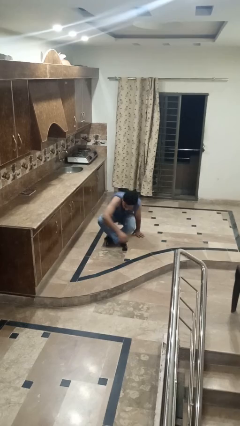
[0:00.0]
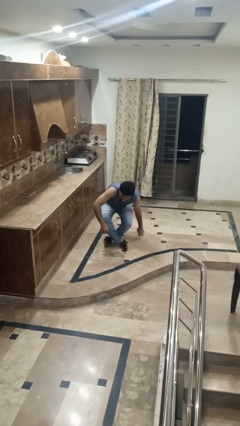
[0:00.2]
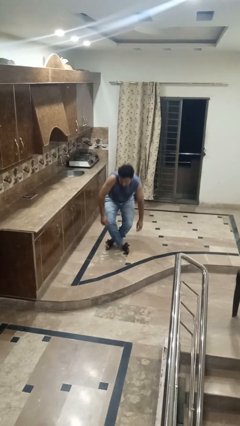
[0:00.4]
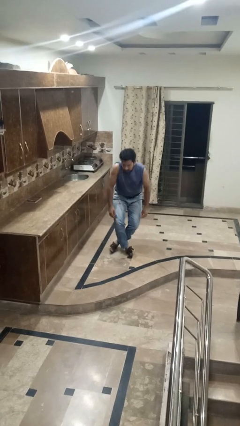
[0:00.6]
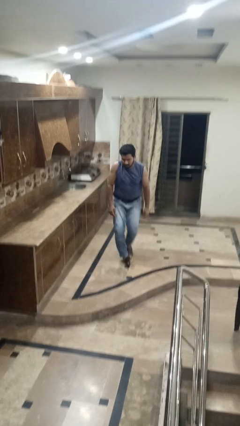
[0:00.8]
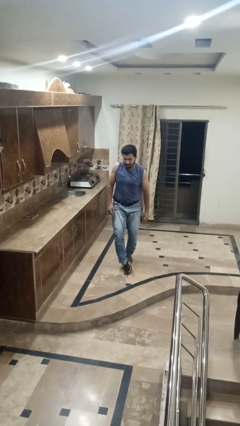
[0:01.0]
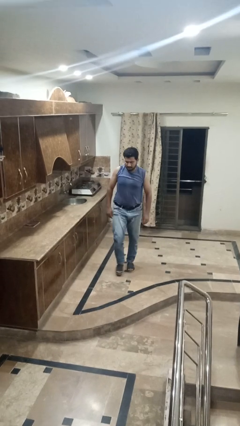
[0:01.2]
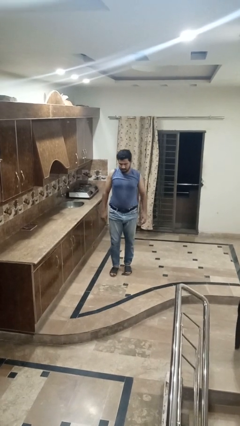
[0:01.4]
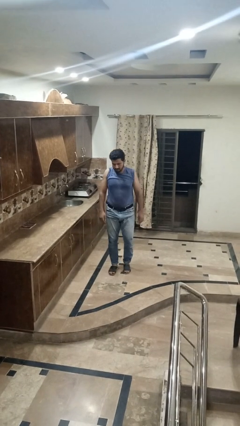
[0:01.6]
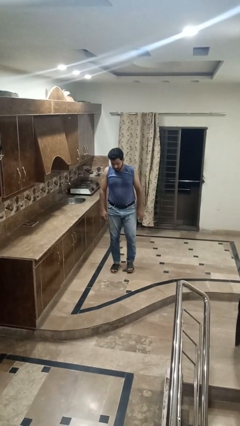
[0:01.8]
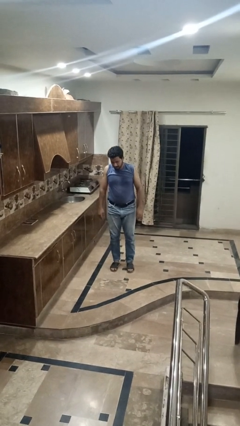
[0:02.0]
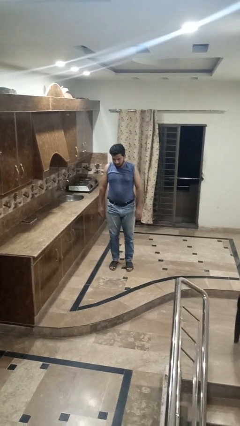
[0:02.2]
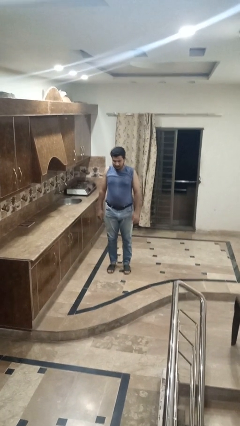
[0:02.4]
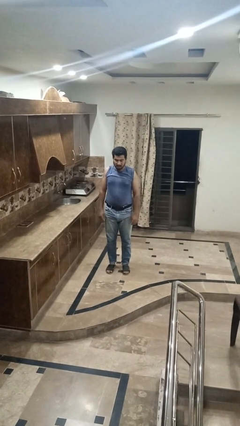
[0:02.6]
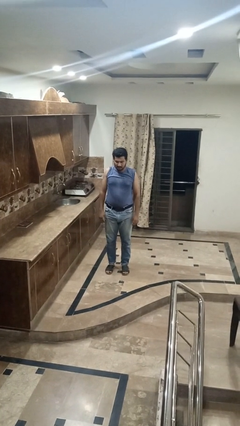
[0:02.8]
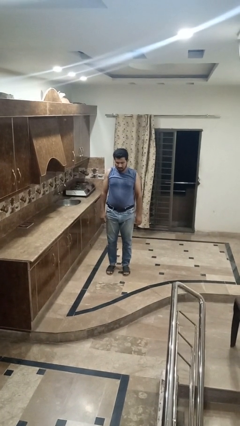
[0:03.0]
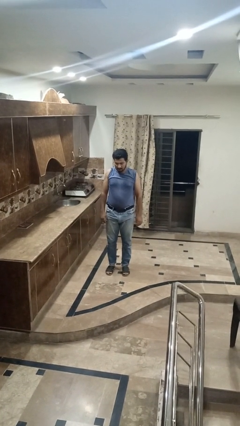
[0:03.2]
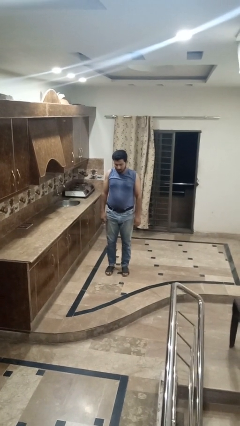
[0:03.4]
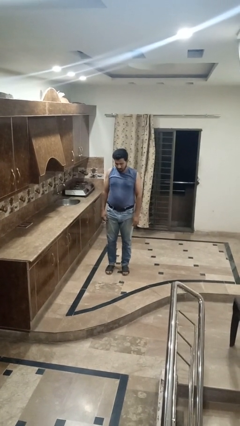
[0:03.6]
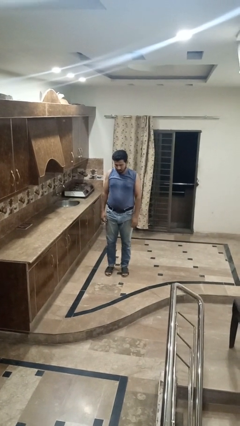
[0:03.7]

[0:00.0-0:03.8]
person stands up from floor

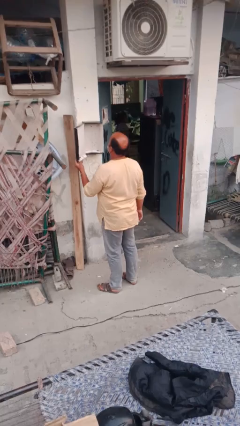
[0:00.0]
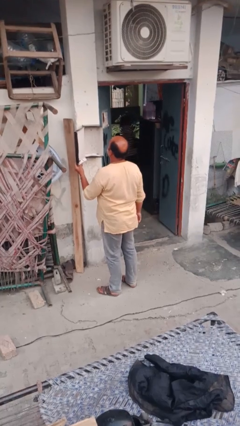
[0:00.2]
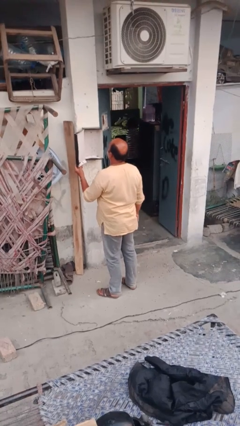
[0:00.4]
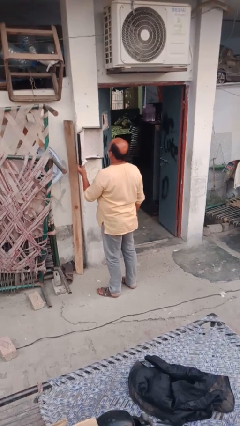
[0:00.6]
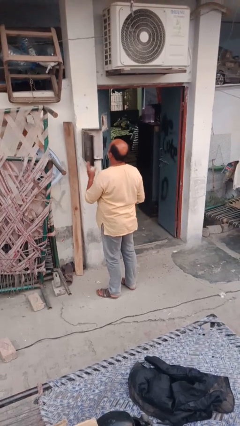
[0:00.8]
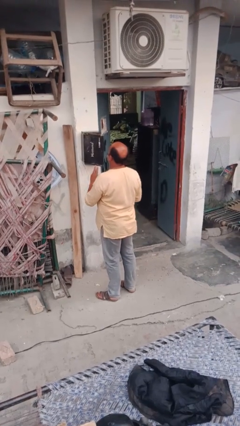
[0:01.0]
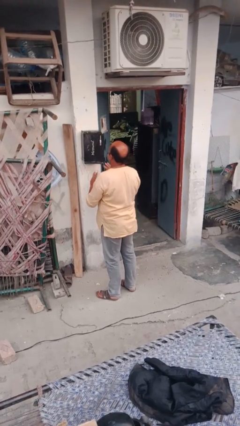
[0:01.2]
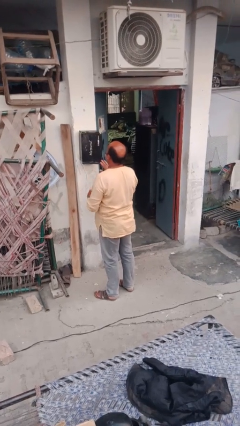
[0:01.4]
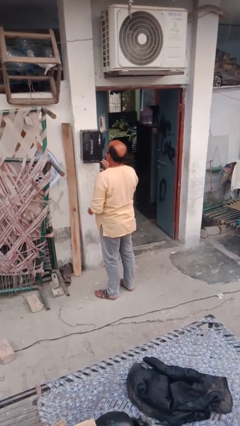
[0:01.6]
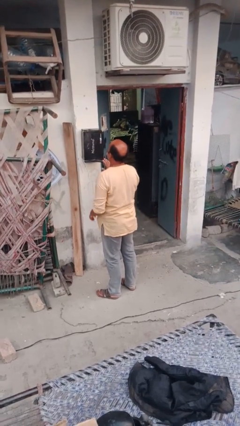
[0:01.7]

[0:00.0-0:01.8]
person closes mailbox

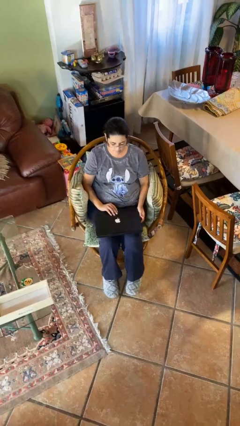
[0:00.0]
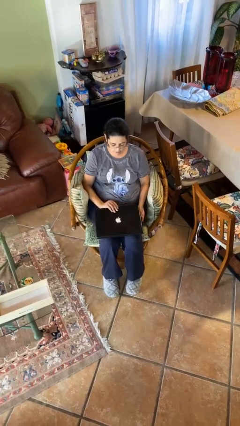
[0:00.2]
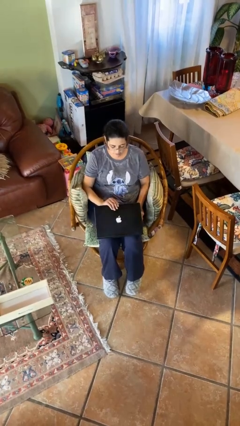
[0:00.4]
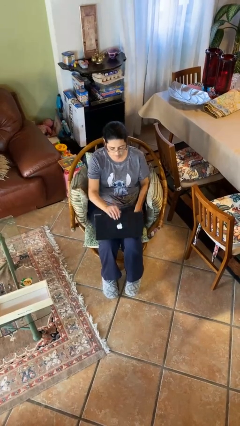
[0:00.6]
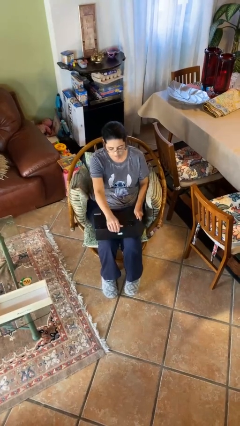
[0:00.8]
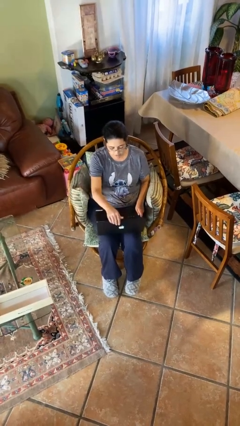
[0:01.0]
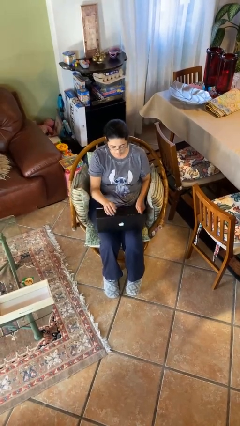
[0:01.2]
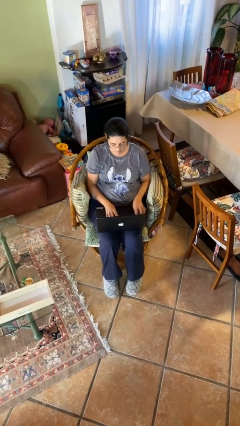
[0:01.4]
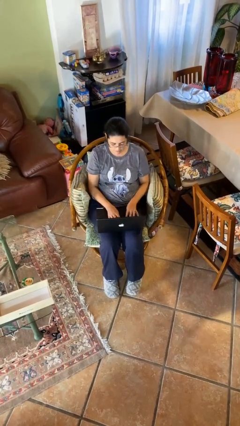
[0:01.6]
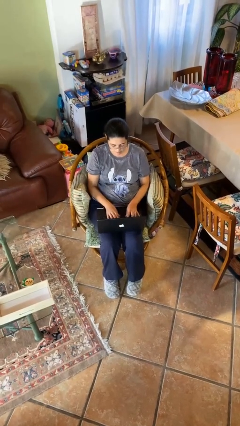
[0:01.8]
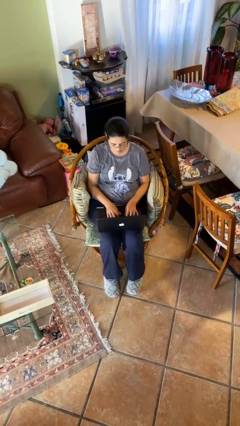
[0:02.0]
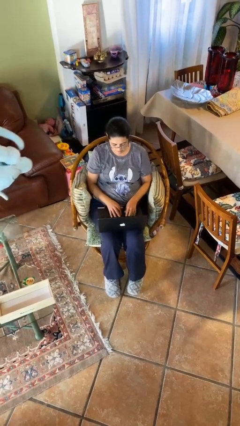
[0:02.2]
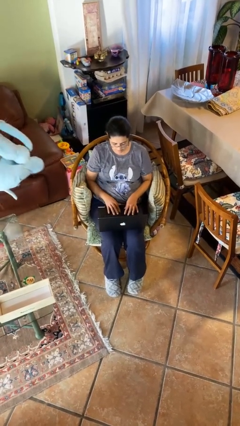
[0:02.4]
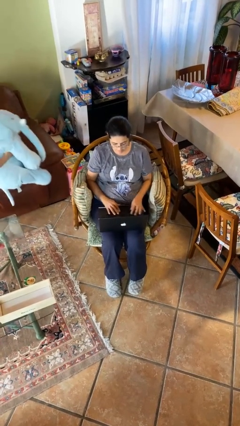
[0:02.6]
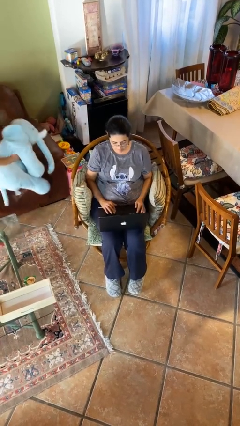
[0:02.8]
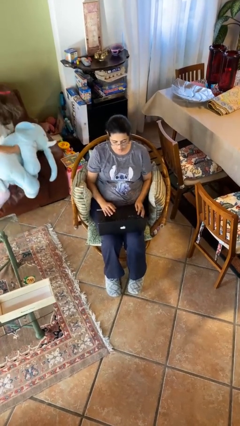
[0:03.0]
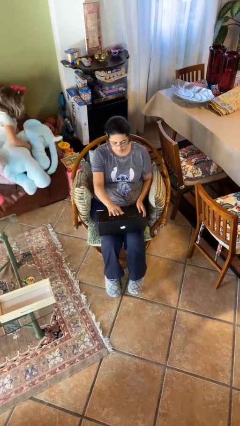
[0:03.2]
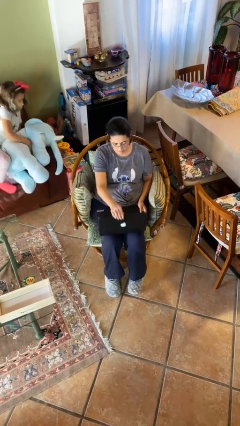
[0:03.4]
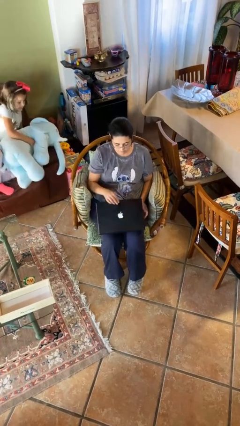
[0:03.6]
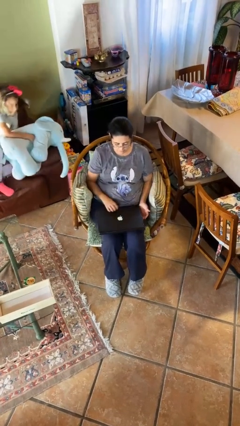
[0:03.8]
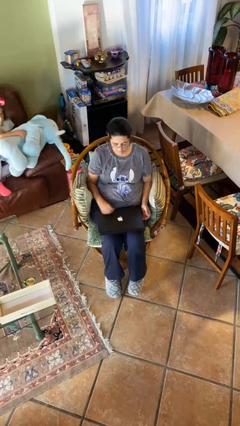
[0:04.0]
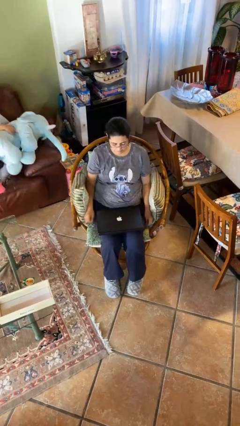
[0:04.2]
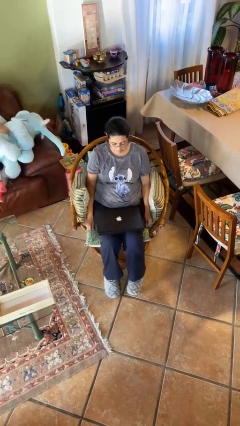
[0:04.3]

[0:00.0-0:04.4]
person interacts with laptop

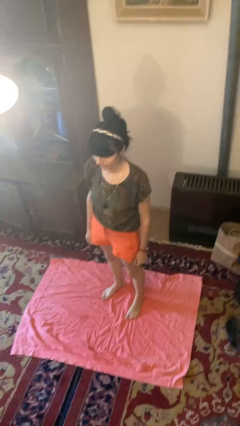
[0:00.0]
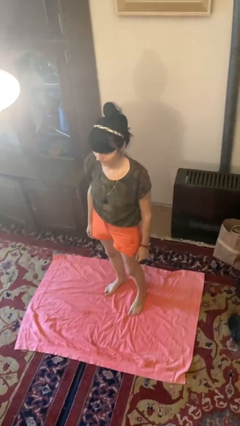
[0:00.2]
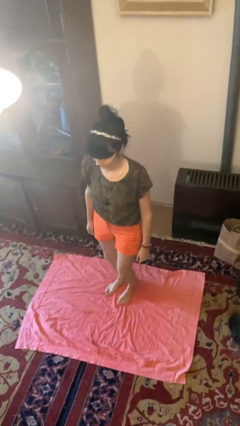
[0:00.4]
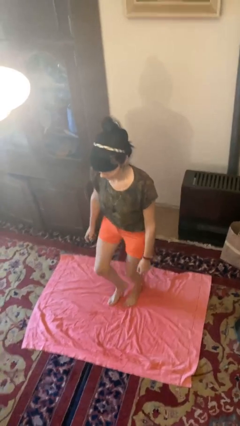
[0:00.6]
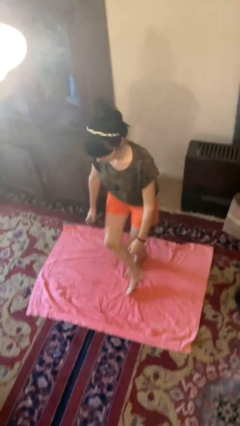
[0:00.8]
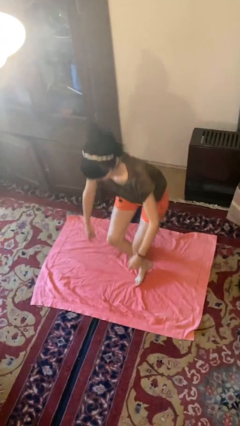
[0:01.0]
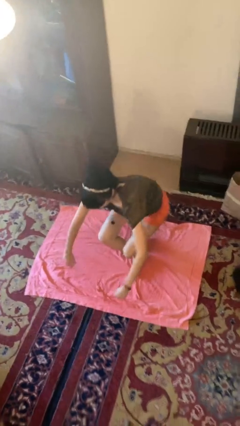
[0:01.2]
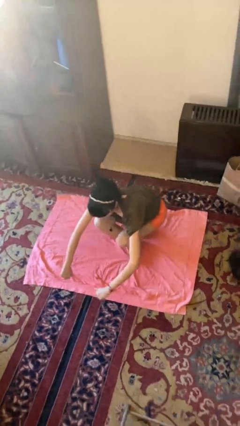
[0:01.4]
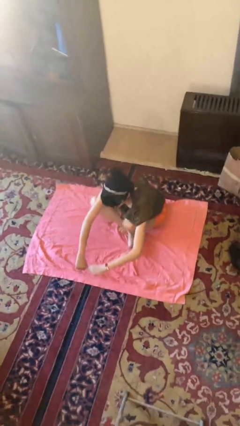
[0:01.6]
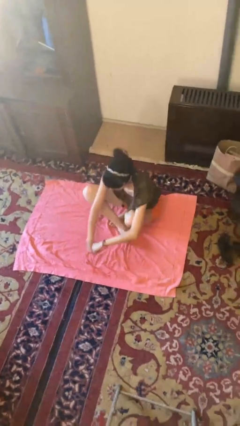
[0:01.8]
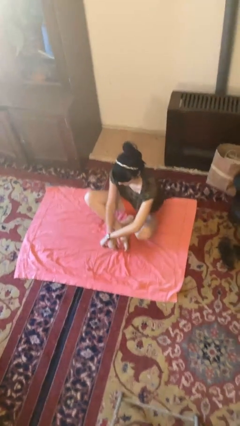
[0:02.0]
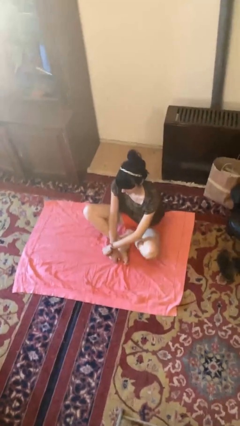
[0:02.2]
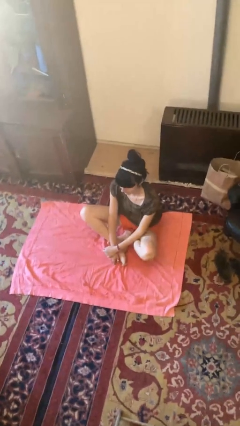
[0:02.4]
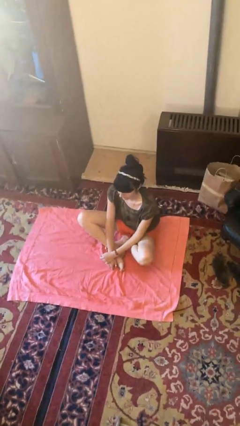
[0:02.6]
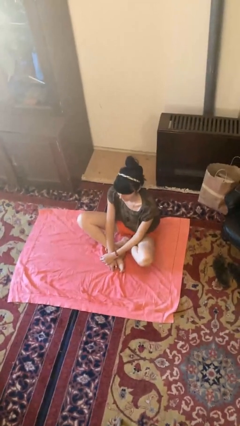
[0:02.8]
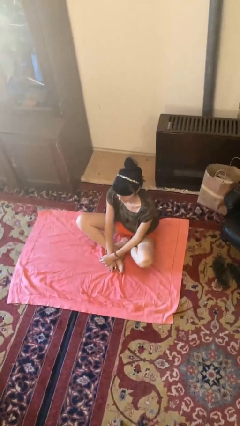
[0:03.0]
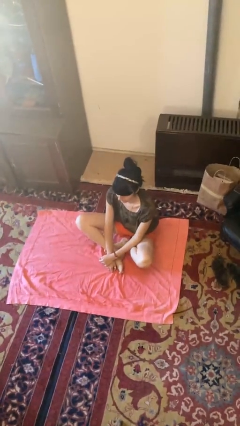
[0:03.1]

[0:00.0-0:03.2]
person sits crisscross

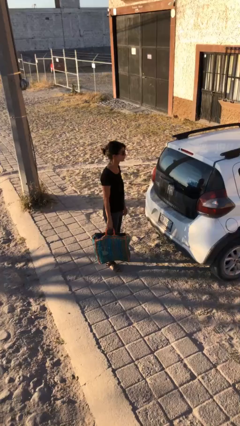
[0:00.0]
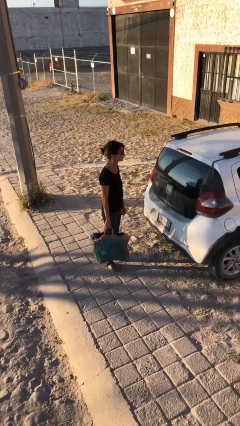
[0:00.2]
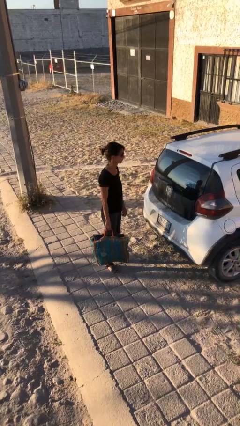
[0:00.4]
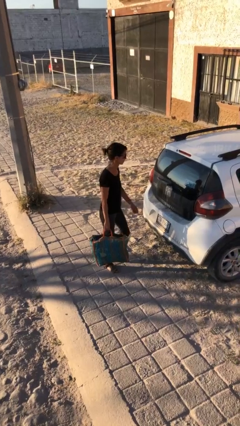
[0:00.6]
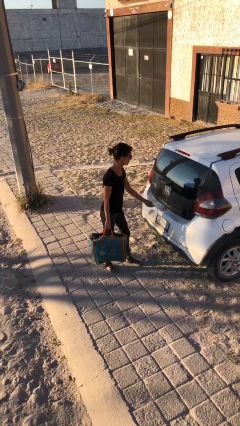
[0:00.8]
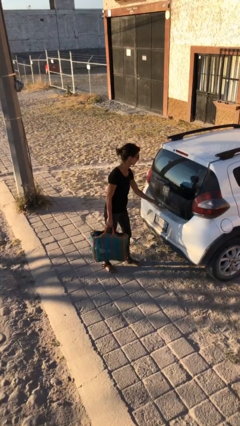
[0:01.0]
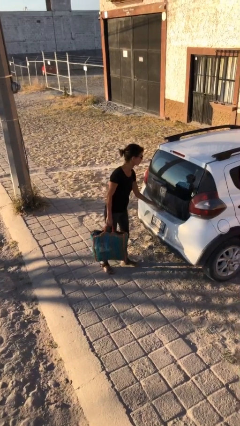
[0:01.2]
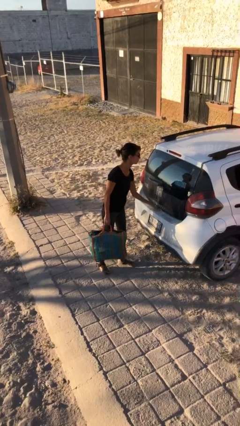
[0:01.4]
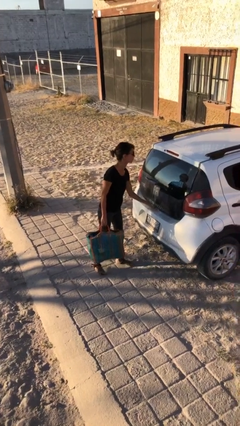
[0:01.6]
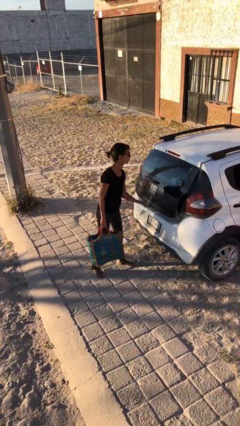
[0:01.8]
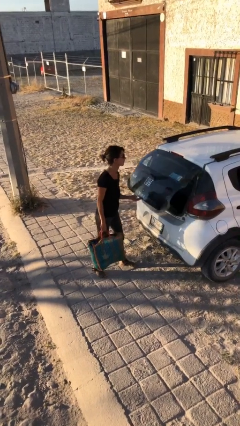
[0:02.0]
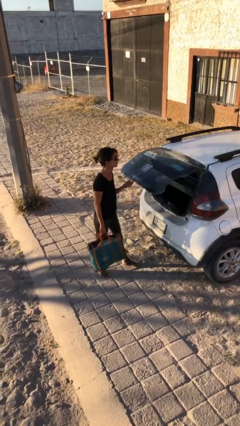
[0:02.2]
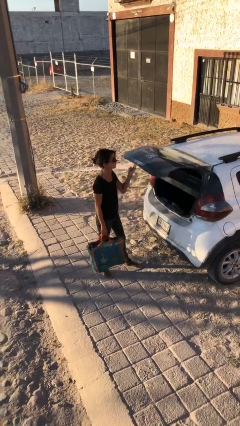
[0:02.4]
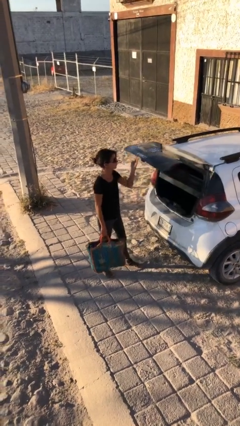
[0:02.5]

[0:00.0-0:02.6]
person opens car trunk

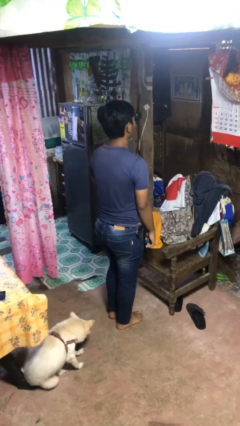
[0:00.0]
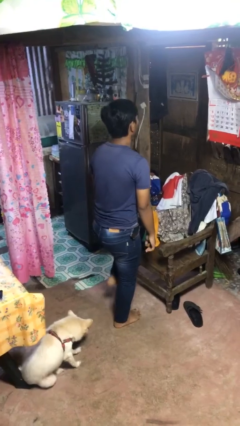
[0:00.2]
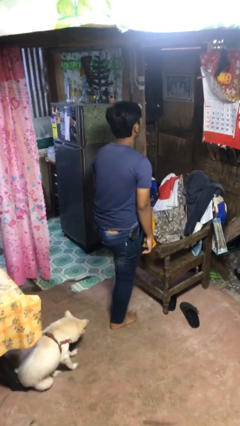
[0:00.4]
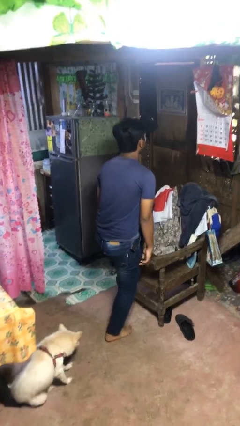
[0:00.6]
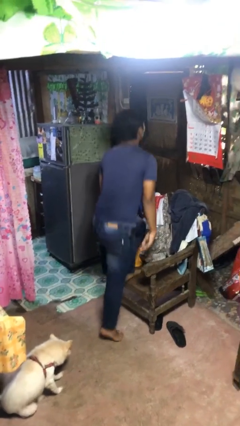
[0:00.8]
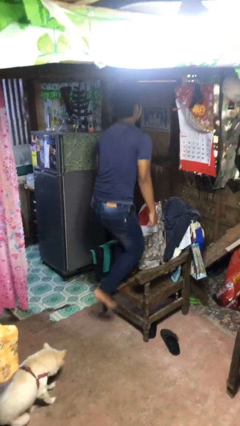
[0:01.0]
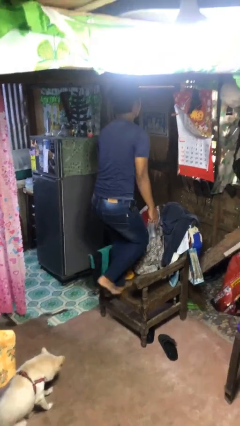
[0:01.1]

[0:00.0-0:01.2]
person climbs on chair

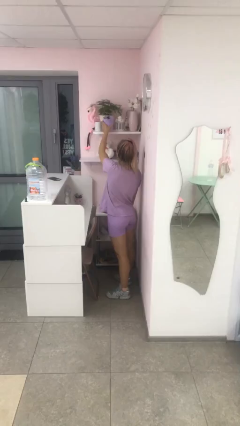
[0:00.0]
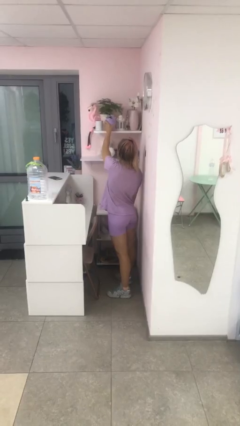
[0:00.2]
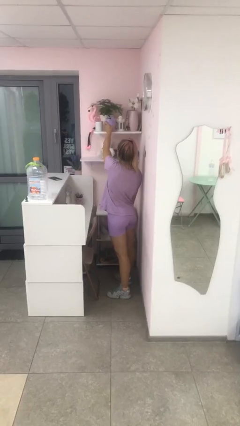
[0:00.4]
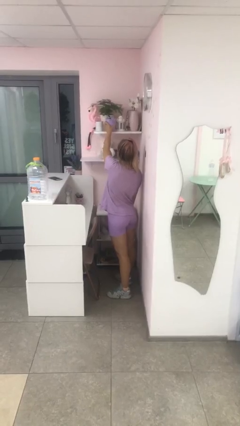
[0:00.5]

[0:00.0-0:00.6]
person puts down object into cabinet
